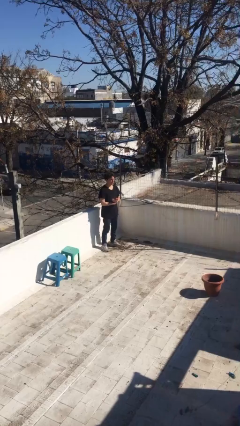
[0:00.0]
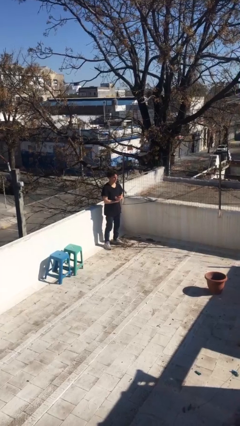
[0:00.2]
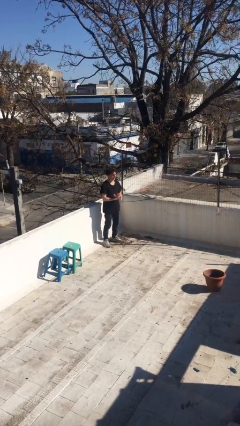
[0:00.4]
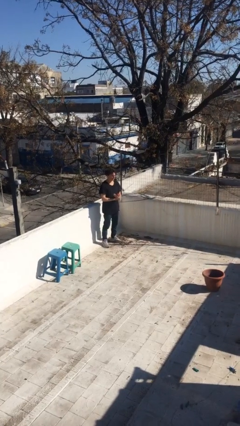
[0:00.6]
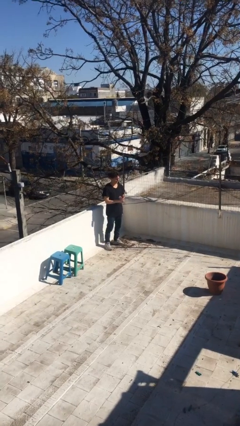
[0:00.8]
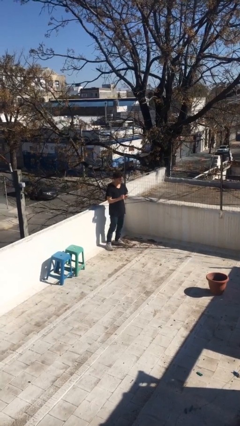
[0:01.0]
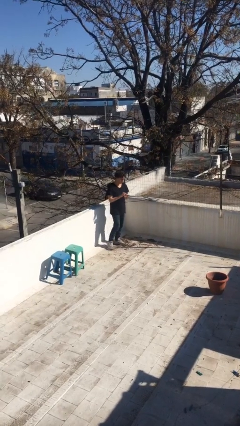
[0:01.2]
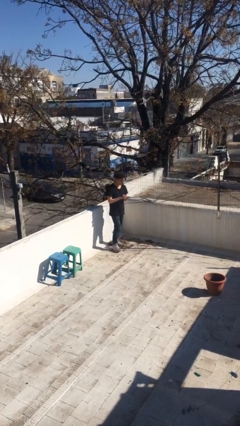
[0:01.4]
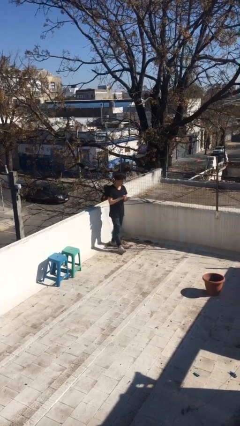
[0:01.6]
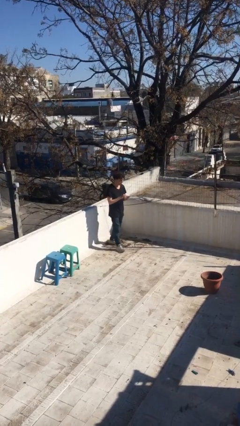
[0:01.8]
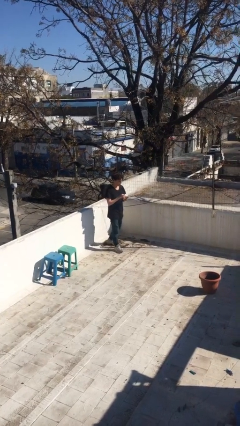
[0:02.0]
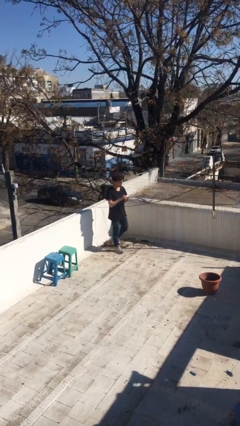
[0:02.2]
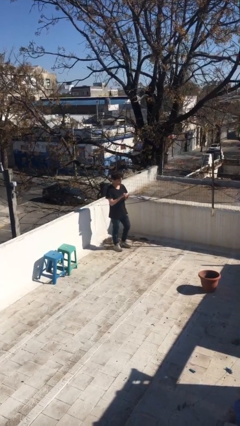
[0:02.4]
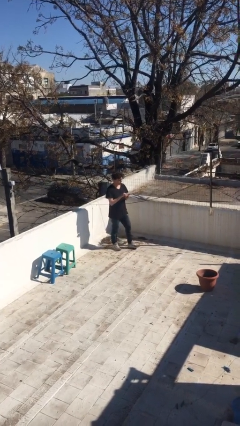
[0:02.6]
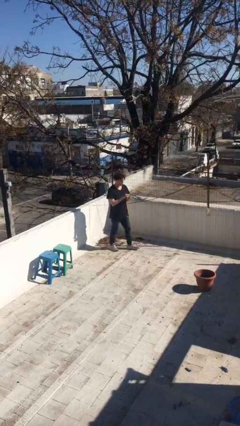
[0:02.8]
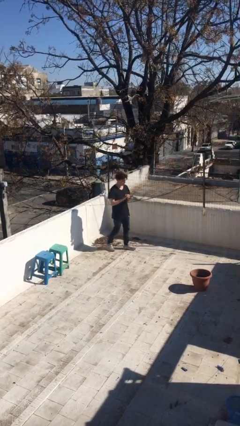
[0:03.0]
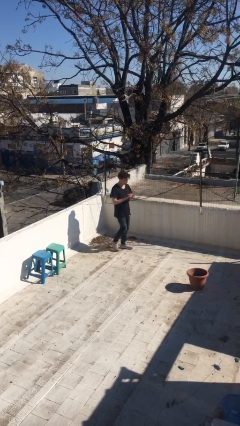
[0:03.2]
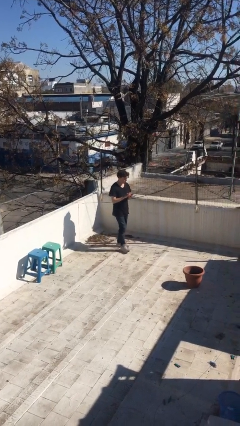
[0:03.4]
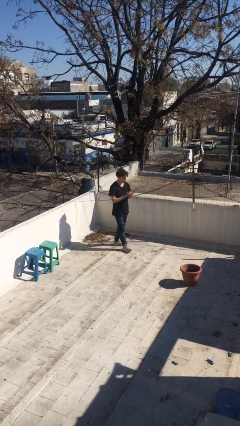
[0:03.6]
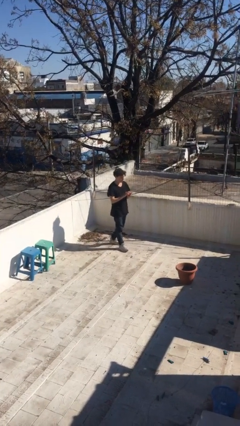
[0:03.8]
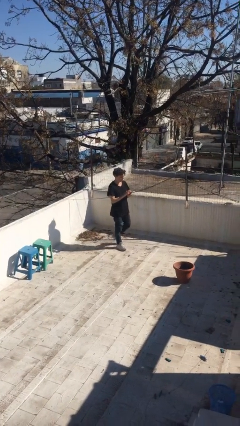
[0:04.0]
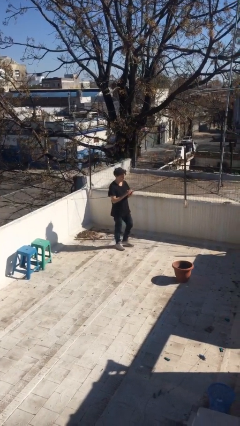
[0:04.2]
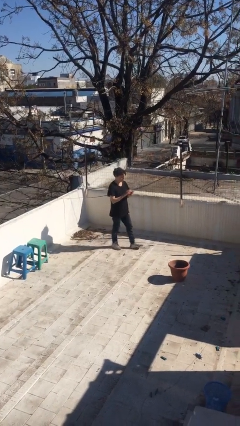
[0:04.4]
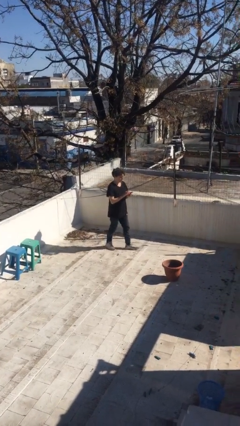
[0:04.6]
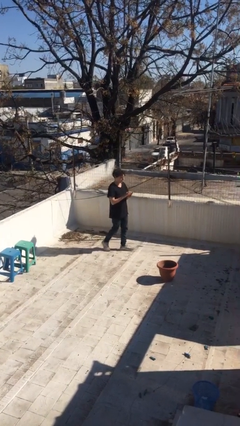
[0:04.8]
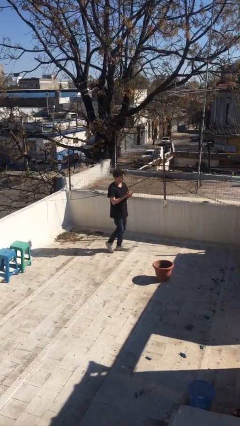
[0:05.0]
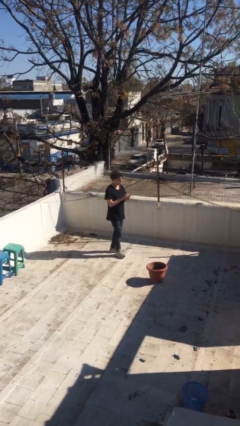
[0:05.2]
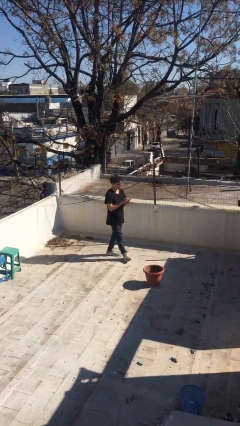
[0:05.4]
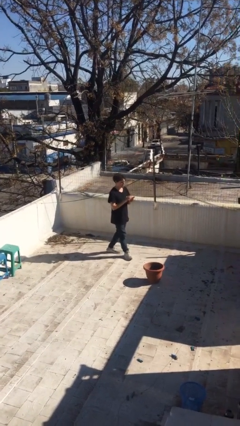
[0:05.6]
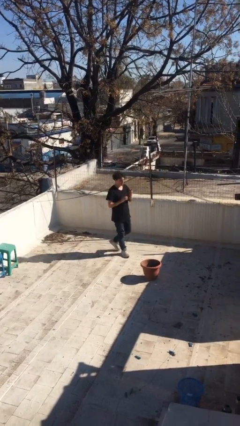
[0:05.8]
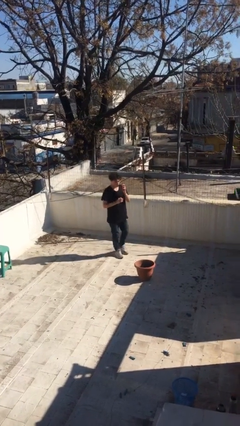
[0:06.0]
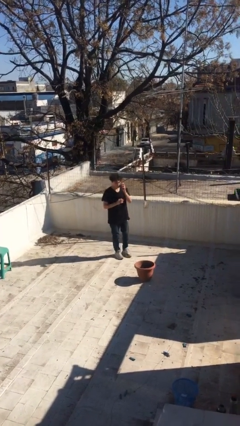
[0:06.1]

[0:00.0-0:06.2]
person texts on phone

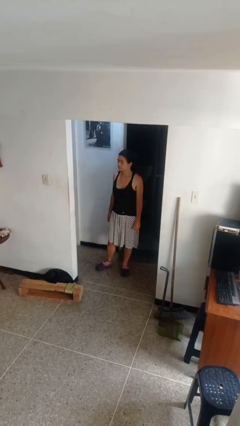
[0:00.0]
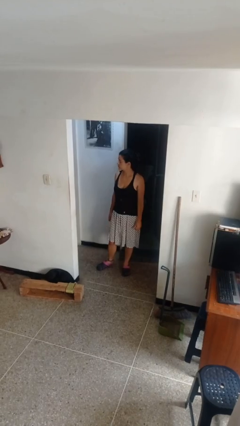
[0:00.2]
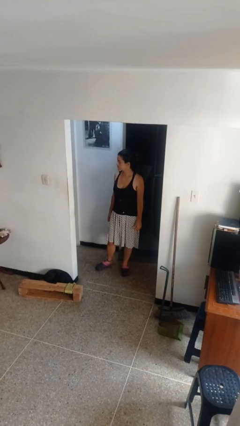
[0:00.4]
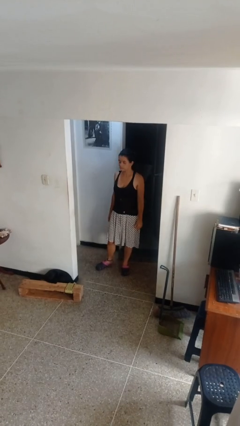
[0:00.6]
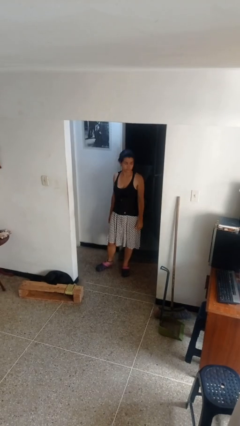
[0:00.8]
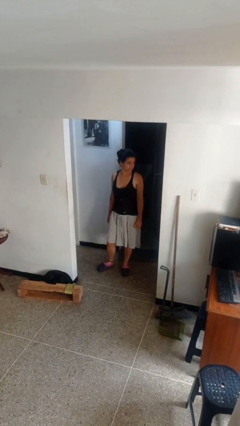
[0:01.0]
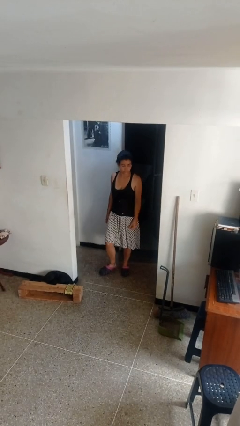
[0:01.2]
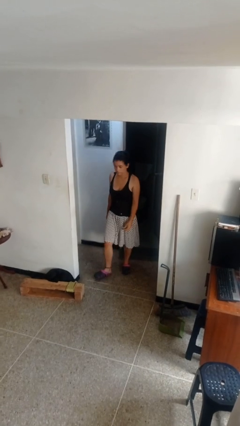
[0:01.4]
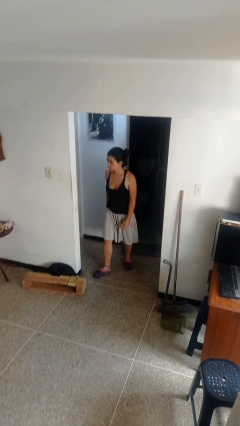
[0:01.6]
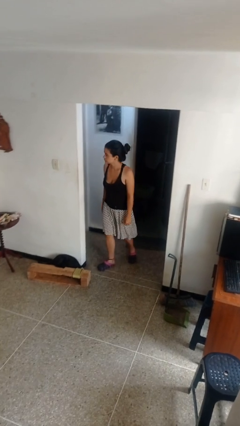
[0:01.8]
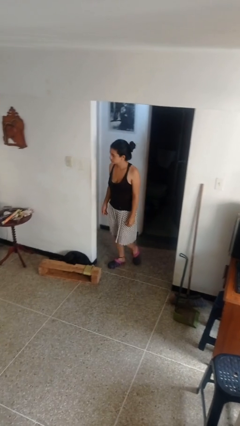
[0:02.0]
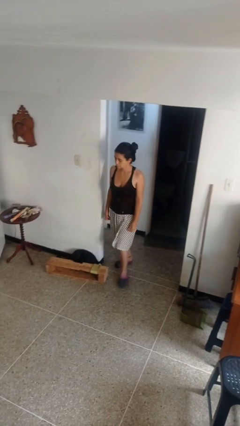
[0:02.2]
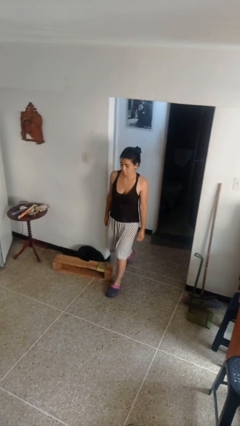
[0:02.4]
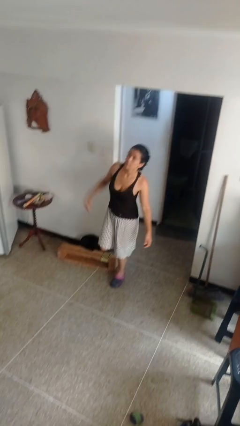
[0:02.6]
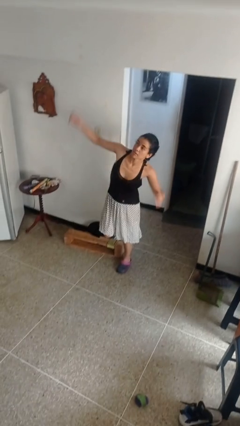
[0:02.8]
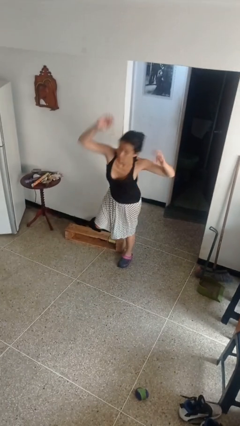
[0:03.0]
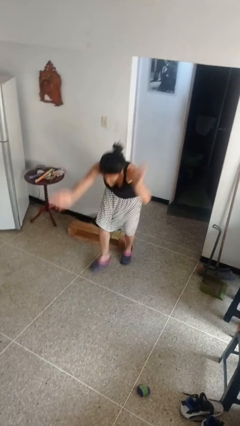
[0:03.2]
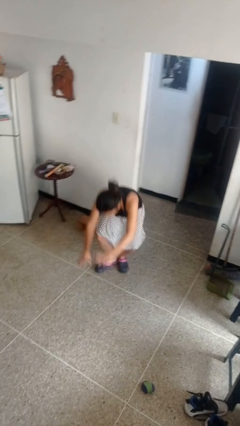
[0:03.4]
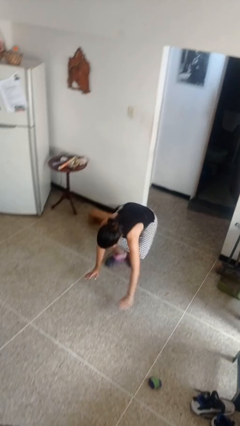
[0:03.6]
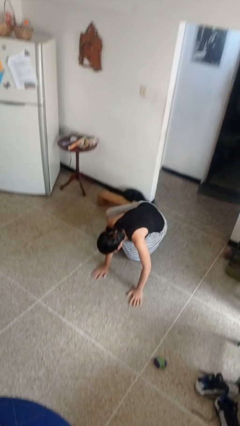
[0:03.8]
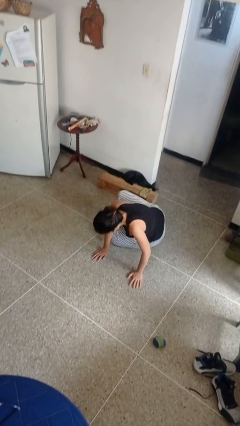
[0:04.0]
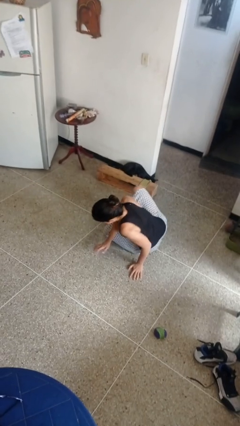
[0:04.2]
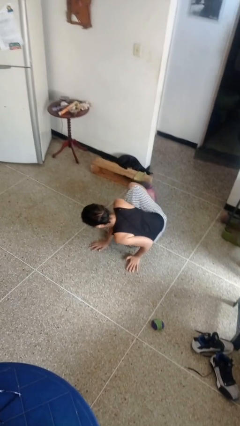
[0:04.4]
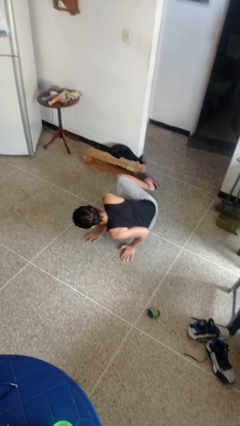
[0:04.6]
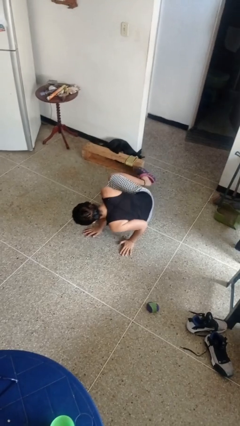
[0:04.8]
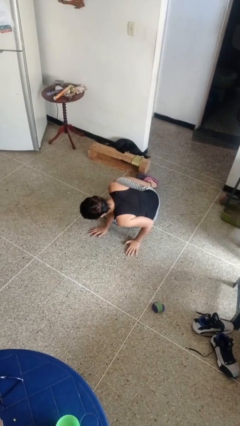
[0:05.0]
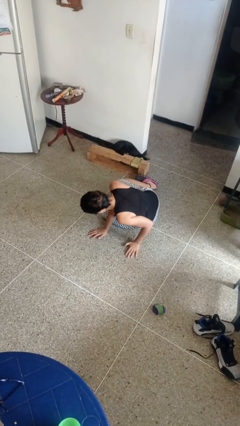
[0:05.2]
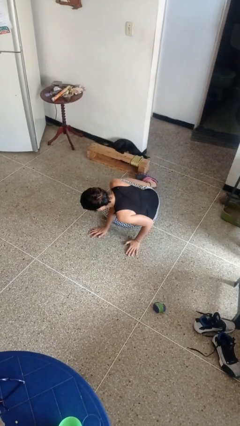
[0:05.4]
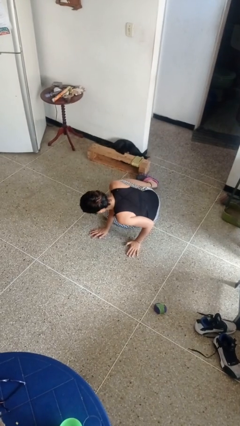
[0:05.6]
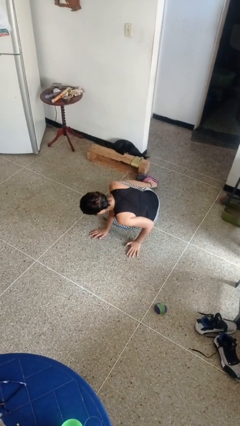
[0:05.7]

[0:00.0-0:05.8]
person trips on object on floor

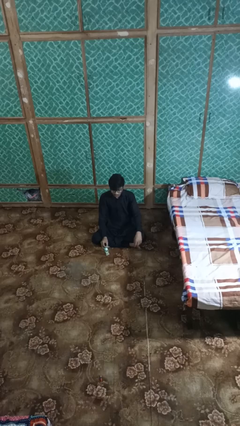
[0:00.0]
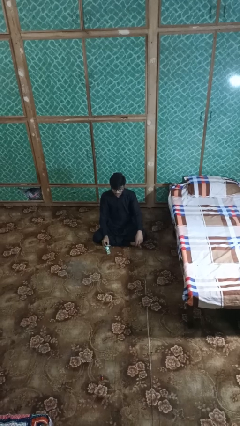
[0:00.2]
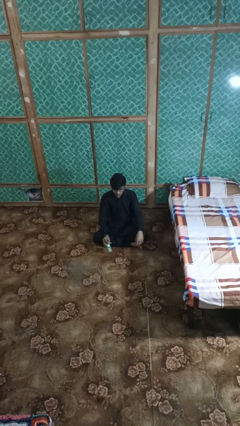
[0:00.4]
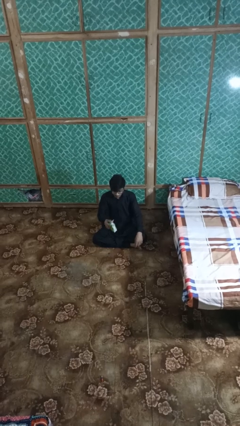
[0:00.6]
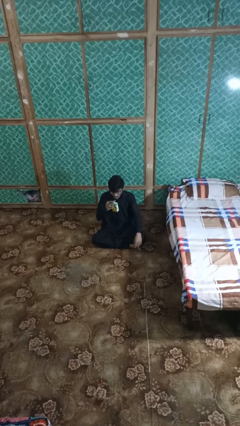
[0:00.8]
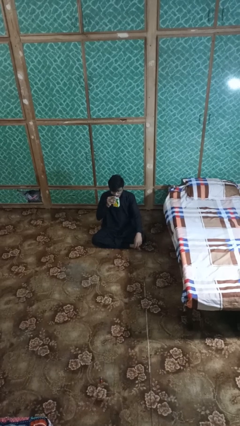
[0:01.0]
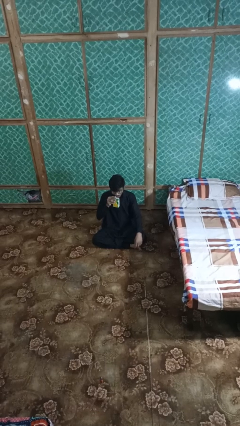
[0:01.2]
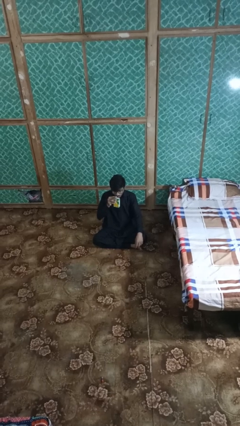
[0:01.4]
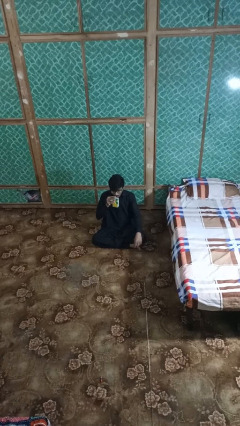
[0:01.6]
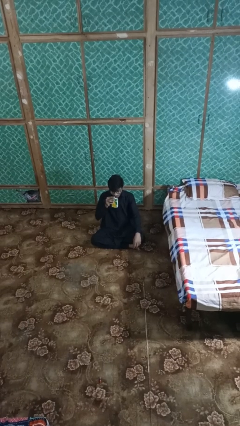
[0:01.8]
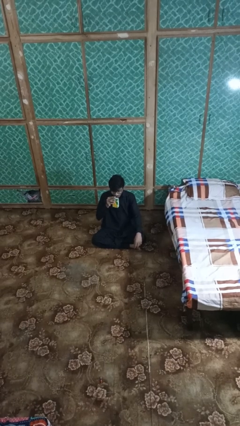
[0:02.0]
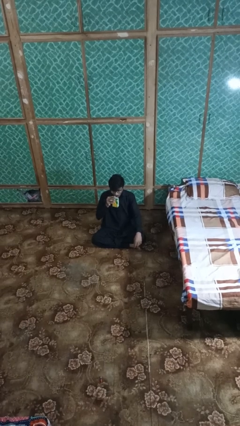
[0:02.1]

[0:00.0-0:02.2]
person drinks from straw

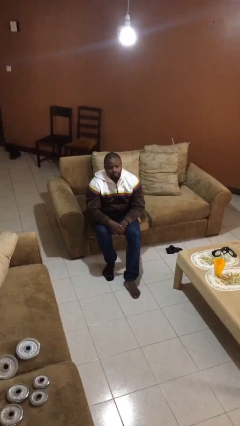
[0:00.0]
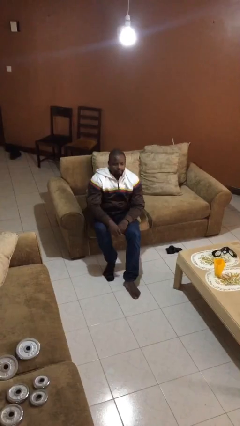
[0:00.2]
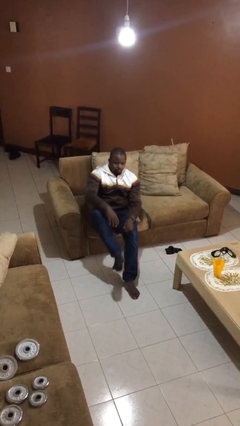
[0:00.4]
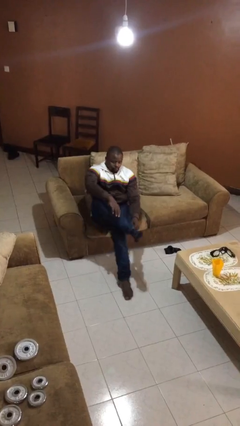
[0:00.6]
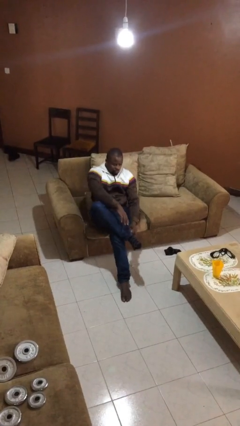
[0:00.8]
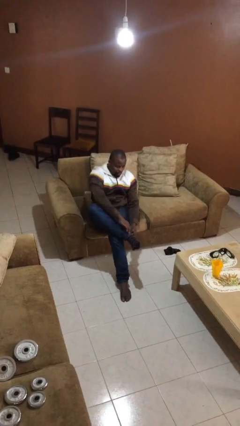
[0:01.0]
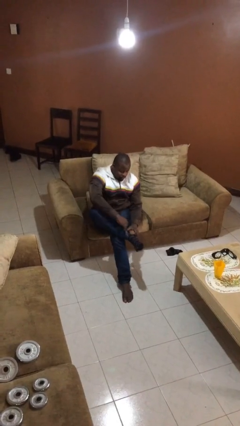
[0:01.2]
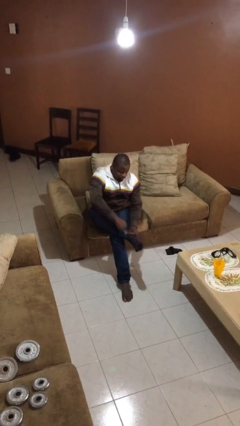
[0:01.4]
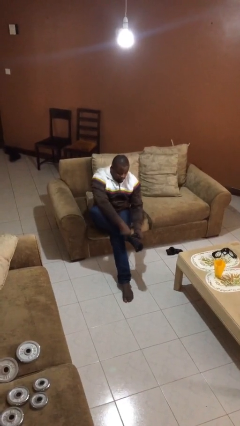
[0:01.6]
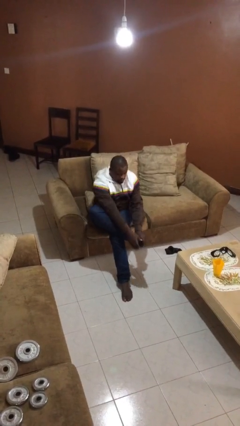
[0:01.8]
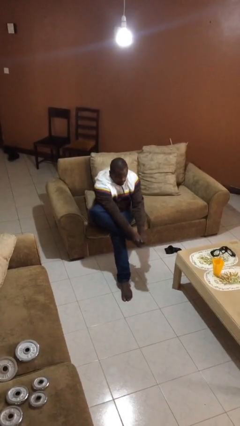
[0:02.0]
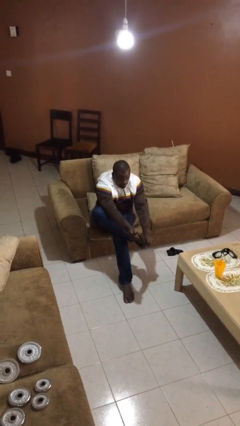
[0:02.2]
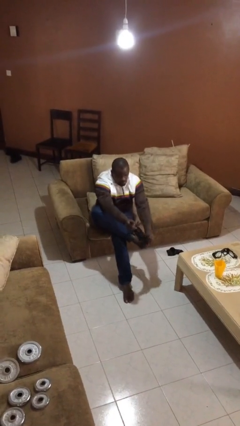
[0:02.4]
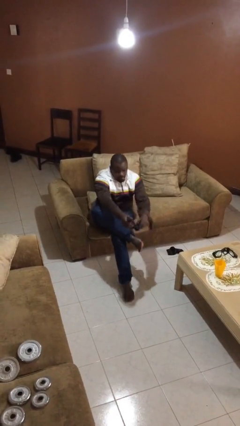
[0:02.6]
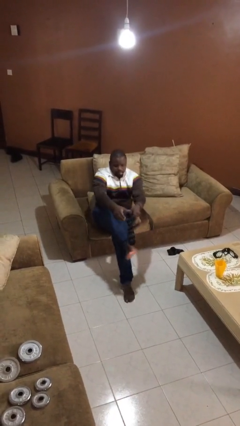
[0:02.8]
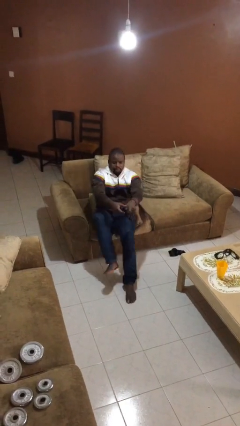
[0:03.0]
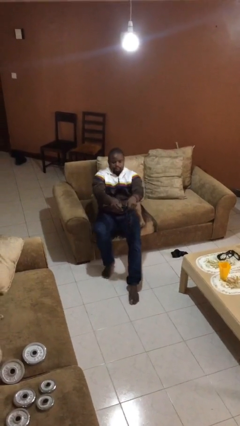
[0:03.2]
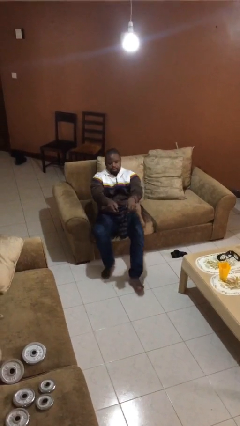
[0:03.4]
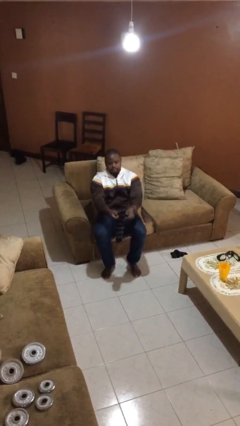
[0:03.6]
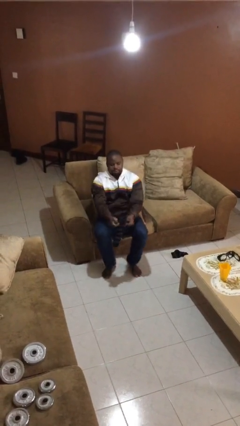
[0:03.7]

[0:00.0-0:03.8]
person takes off socks
